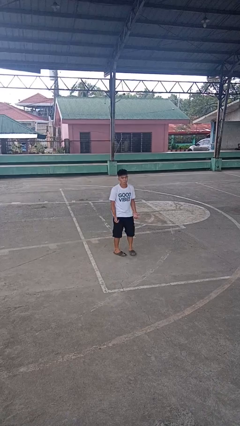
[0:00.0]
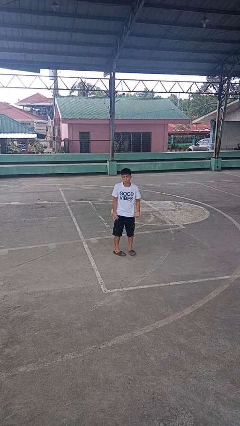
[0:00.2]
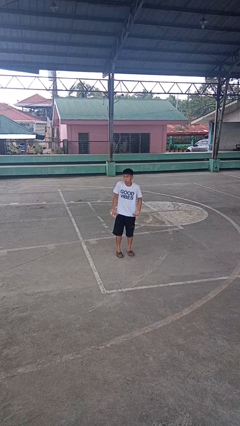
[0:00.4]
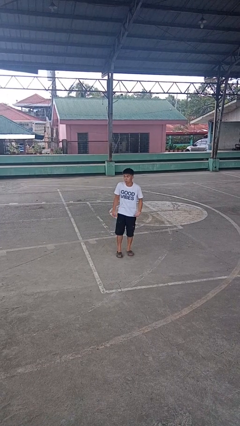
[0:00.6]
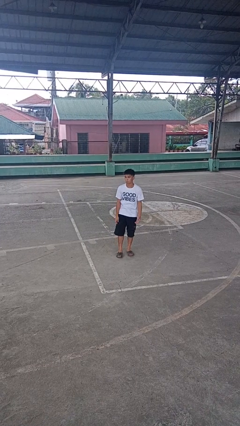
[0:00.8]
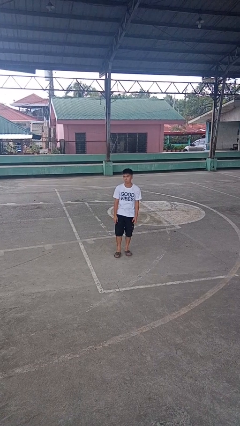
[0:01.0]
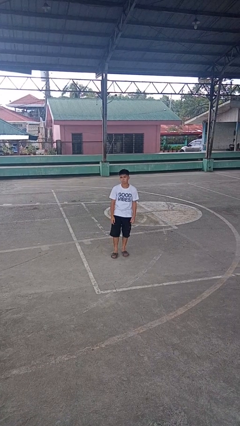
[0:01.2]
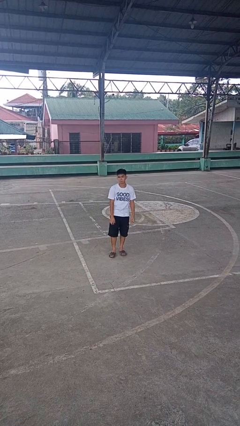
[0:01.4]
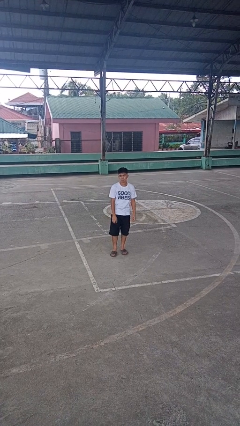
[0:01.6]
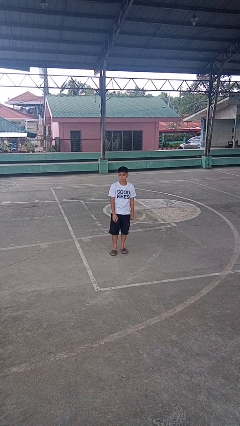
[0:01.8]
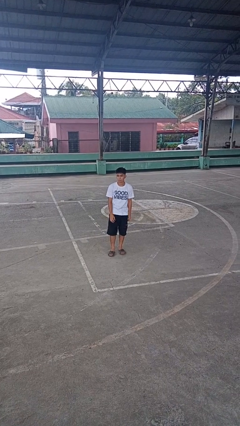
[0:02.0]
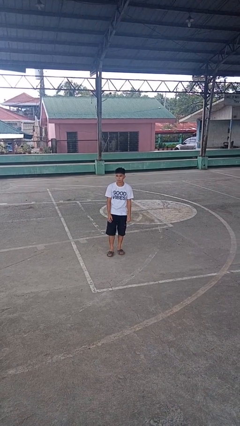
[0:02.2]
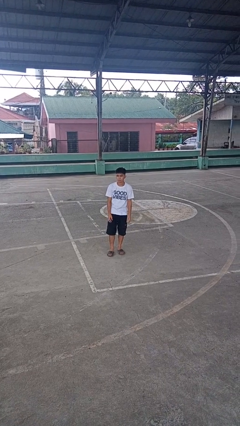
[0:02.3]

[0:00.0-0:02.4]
person shrugs

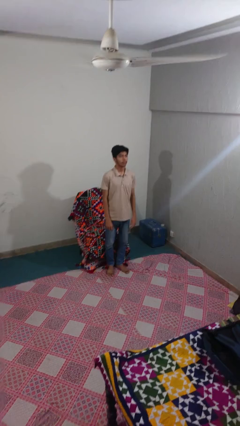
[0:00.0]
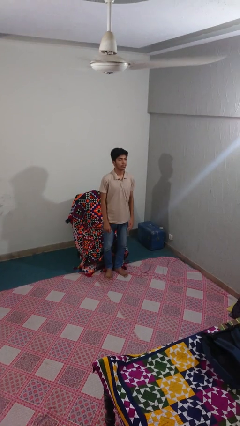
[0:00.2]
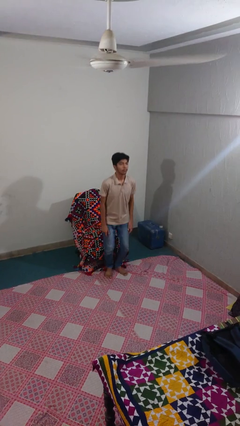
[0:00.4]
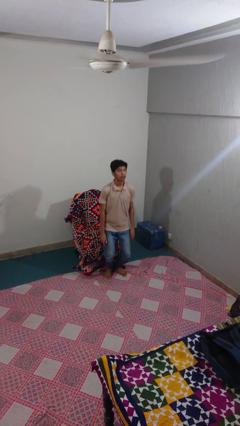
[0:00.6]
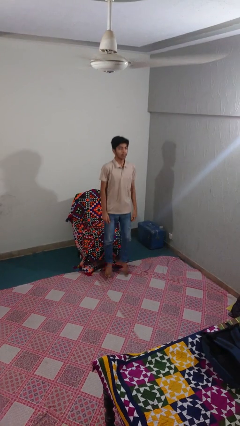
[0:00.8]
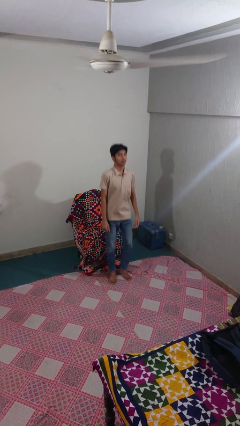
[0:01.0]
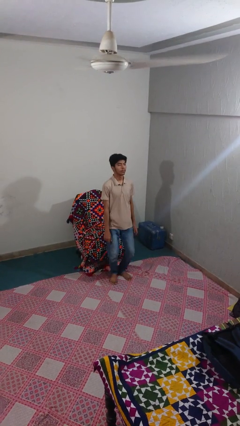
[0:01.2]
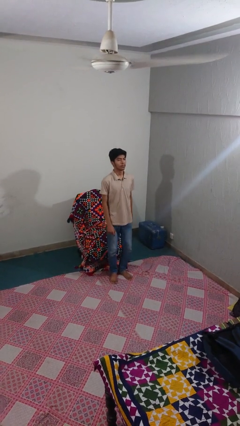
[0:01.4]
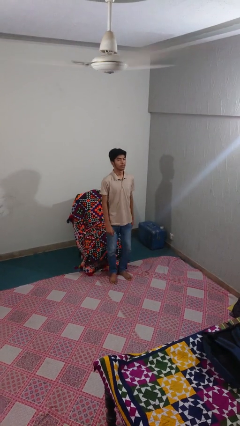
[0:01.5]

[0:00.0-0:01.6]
person jumps

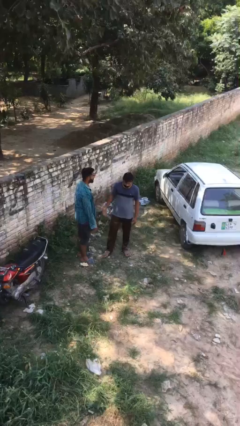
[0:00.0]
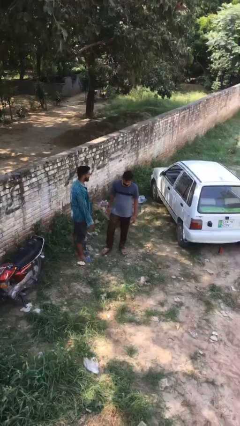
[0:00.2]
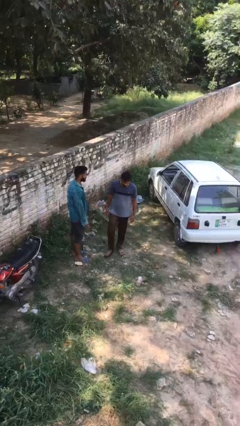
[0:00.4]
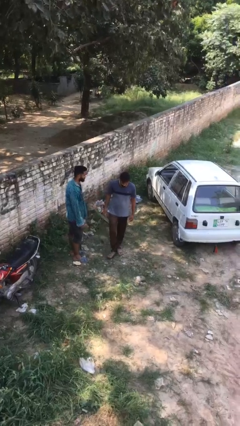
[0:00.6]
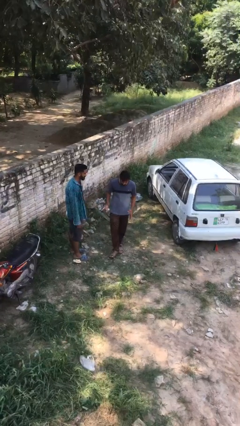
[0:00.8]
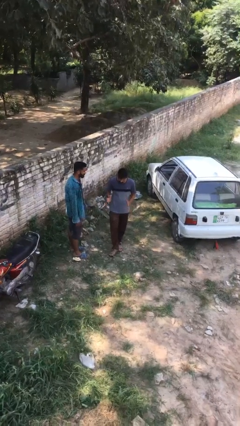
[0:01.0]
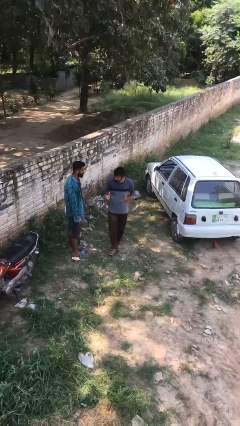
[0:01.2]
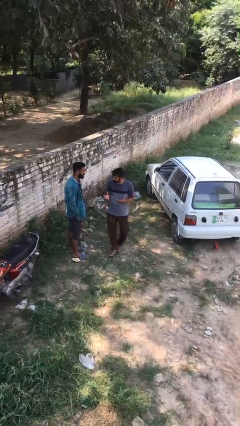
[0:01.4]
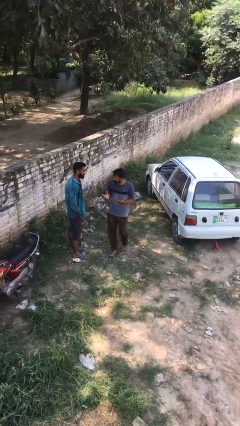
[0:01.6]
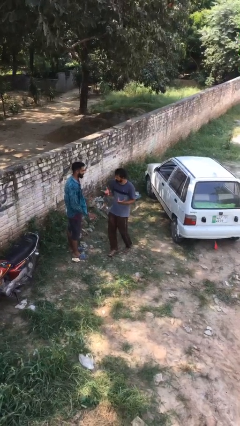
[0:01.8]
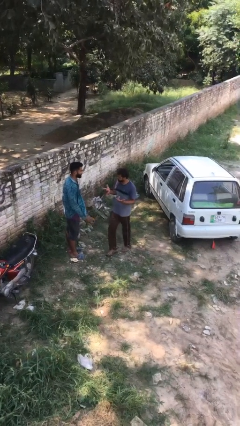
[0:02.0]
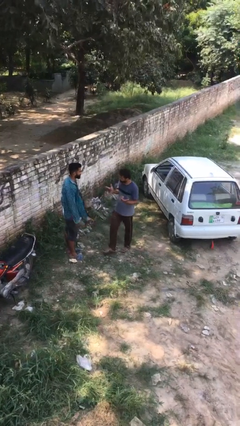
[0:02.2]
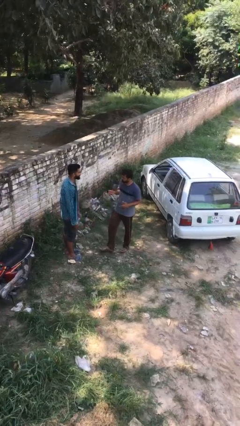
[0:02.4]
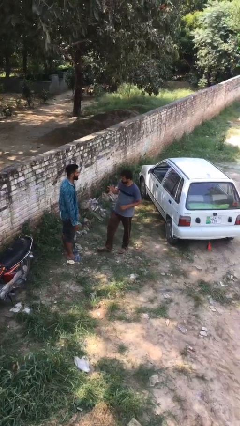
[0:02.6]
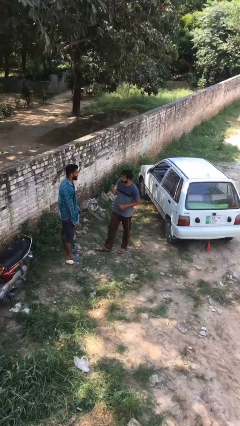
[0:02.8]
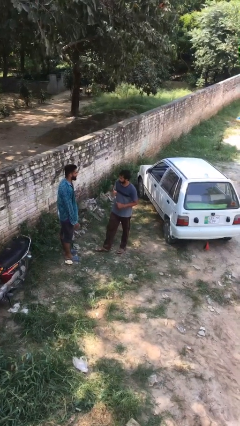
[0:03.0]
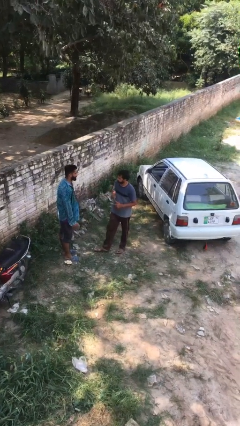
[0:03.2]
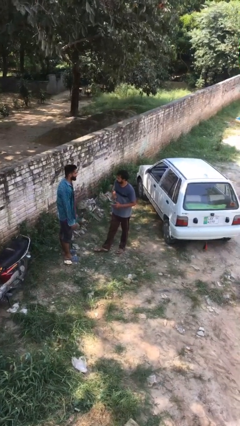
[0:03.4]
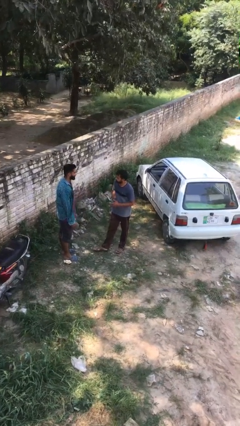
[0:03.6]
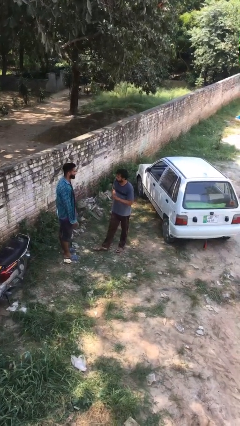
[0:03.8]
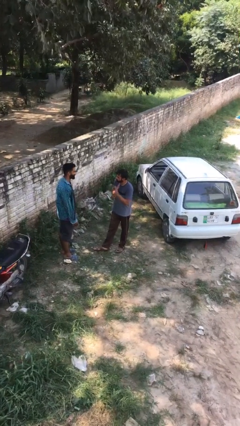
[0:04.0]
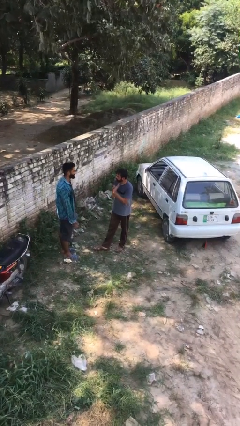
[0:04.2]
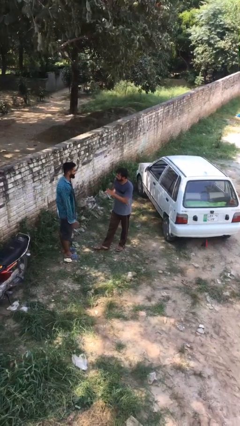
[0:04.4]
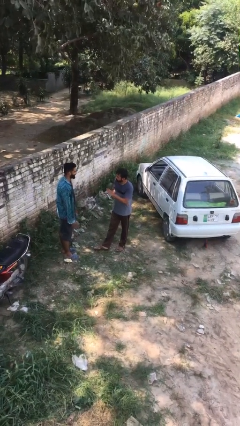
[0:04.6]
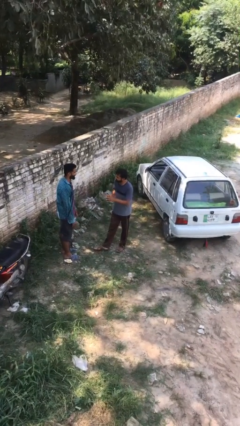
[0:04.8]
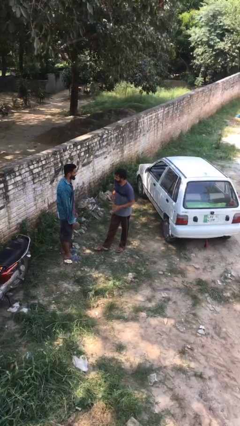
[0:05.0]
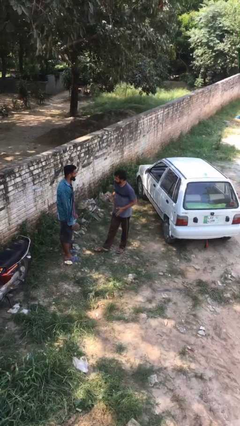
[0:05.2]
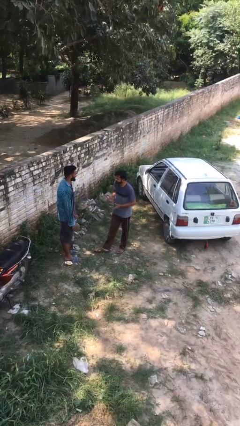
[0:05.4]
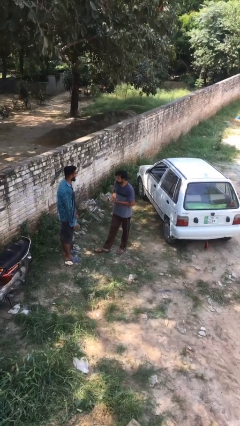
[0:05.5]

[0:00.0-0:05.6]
person talks to person

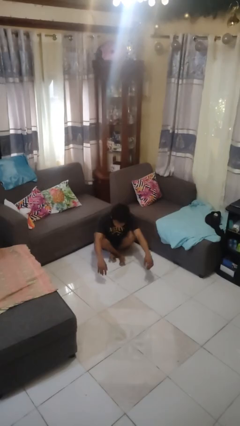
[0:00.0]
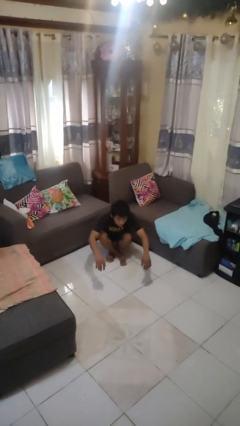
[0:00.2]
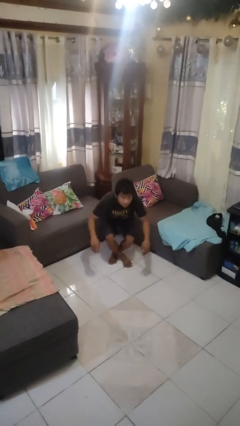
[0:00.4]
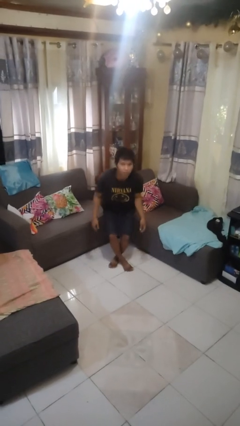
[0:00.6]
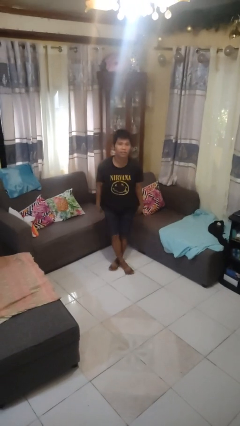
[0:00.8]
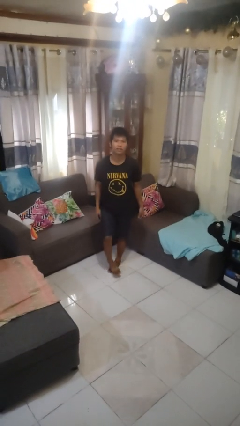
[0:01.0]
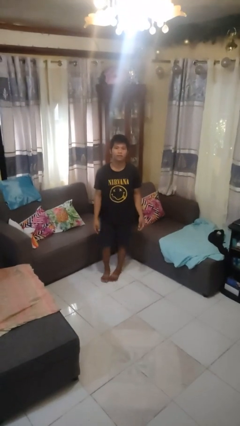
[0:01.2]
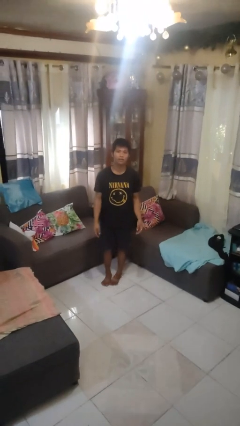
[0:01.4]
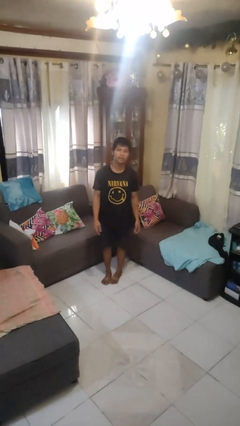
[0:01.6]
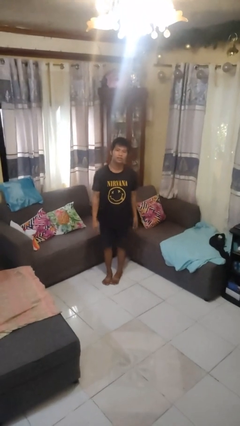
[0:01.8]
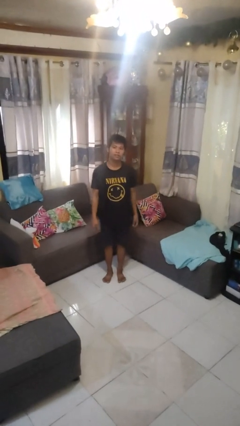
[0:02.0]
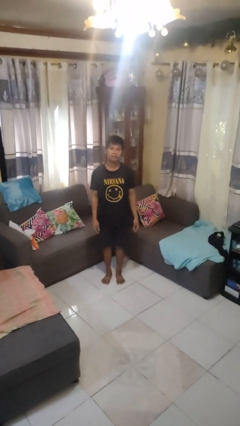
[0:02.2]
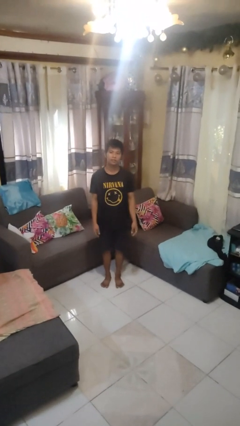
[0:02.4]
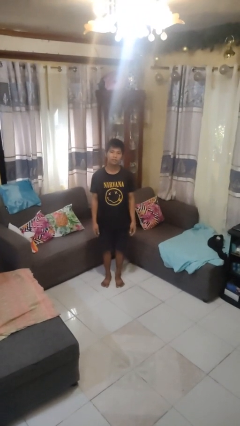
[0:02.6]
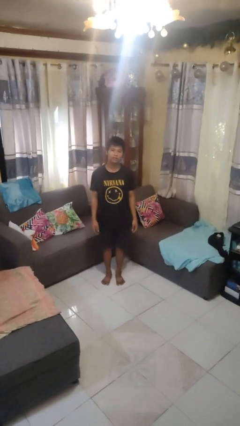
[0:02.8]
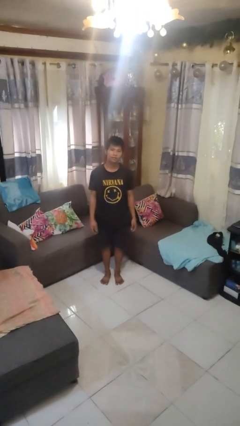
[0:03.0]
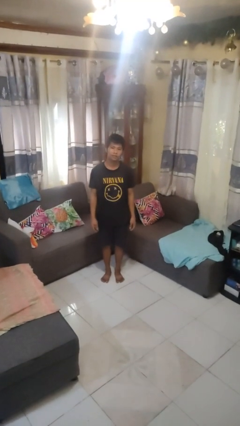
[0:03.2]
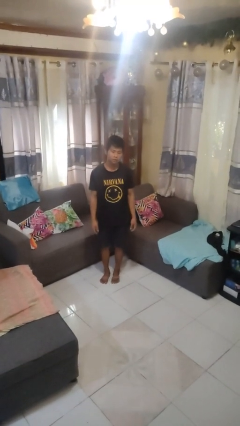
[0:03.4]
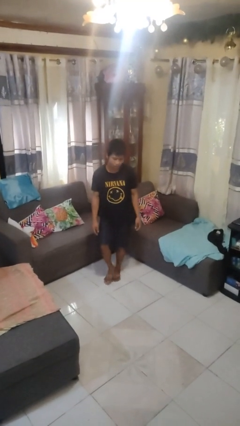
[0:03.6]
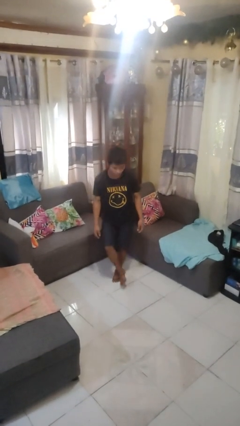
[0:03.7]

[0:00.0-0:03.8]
person stands up from floor

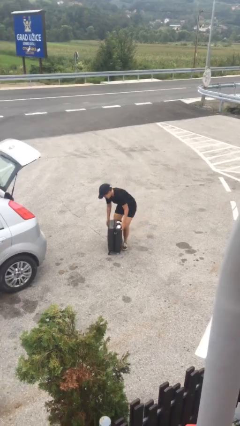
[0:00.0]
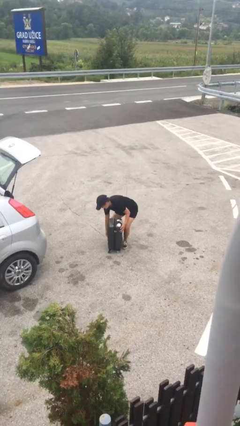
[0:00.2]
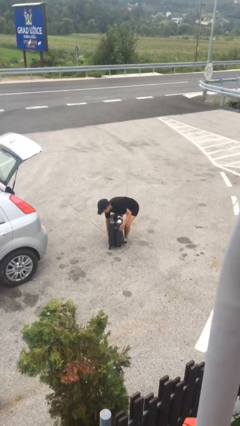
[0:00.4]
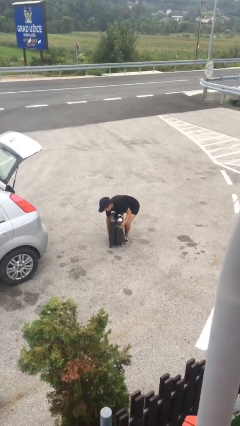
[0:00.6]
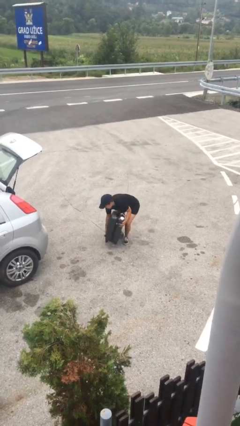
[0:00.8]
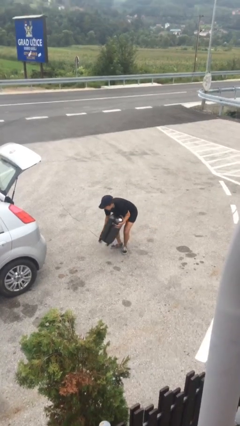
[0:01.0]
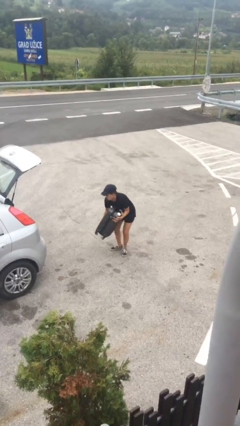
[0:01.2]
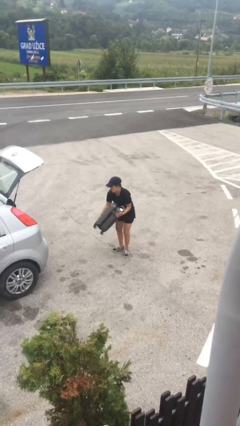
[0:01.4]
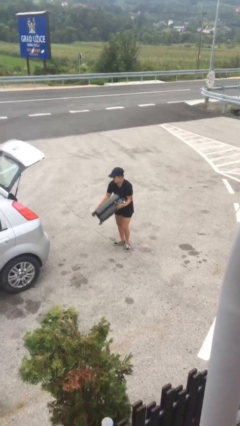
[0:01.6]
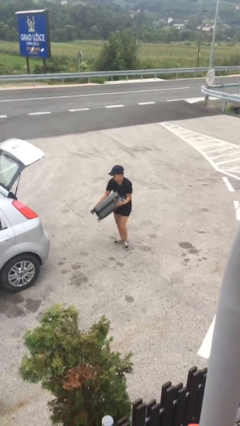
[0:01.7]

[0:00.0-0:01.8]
person picks up object from floor

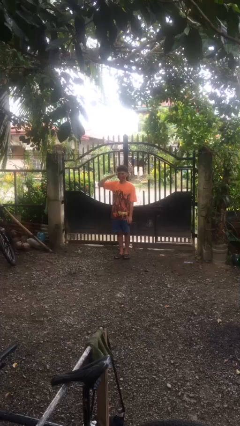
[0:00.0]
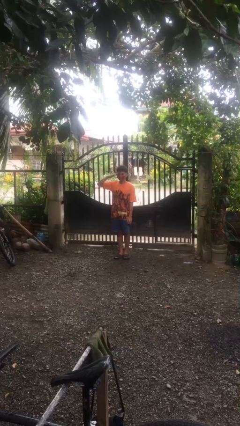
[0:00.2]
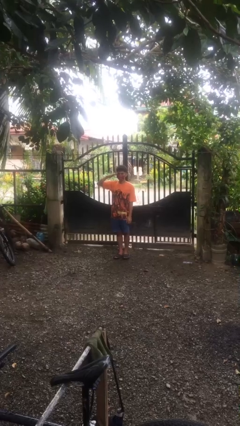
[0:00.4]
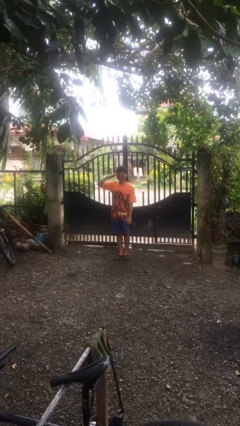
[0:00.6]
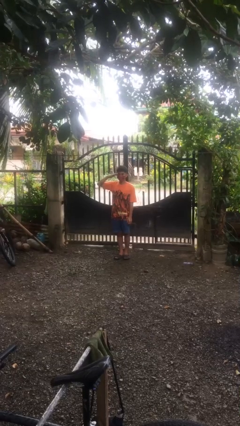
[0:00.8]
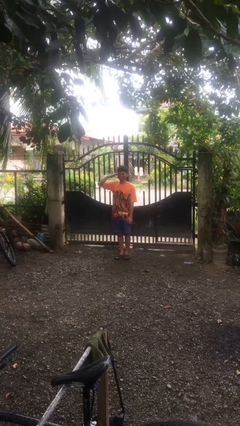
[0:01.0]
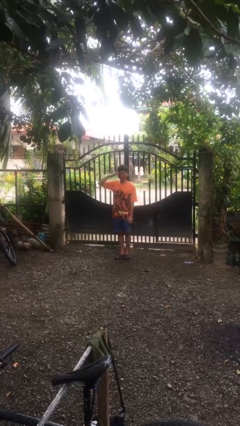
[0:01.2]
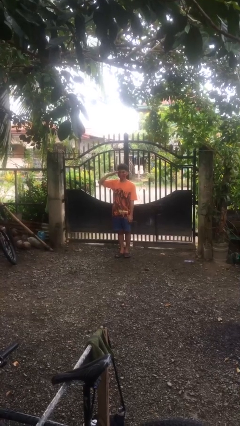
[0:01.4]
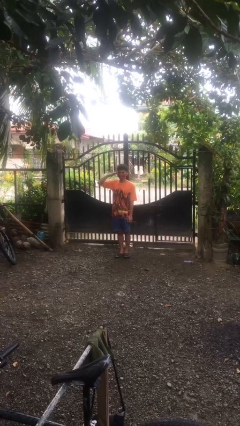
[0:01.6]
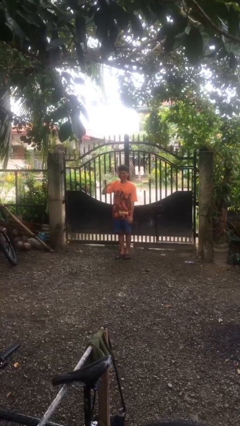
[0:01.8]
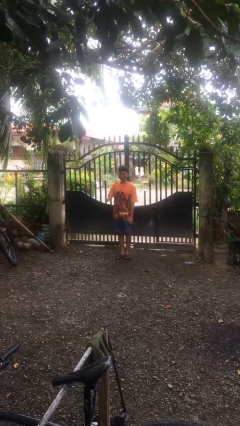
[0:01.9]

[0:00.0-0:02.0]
person salutes
